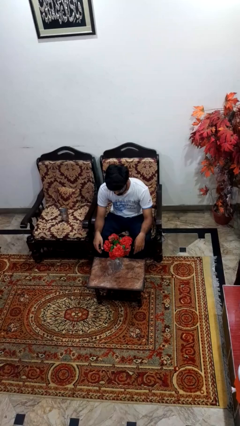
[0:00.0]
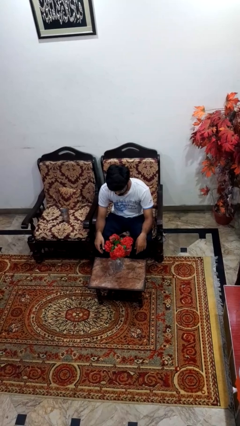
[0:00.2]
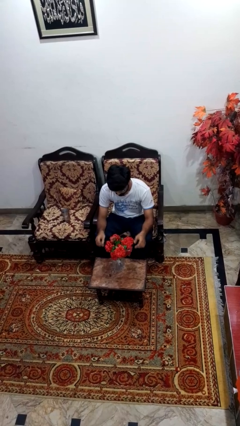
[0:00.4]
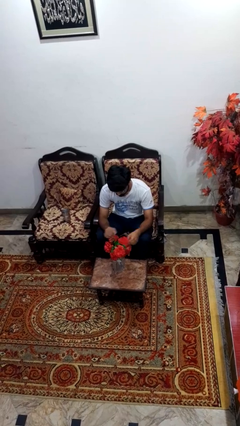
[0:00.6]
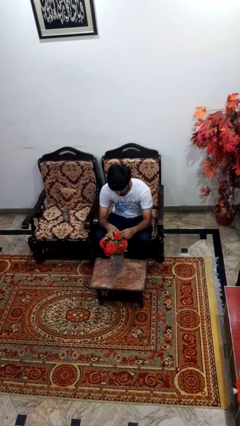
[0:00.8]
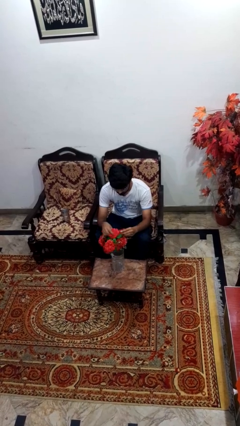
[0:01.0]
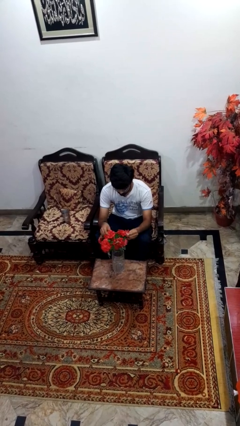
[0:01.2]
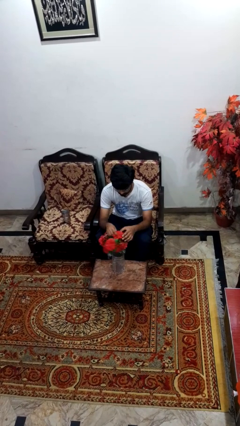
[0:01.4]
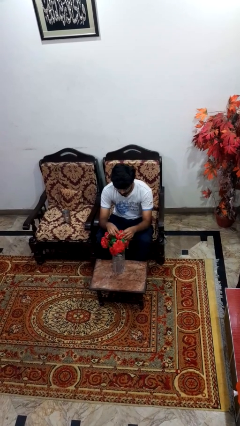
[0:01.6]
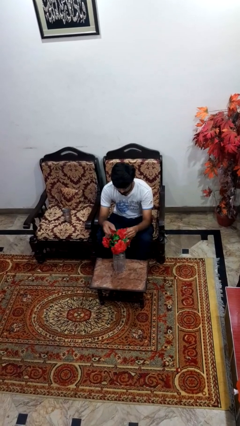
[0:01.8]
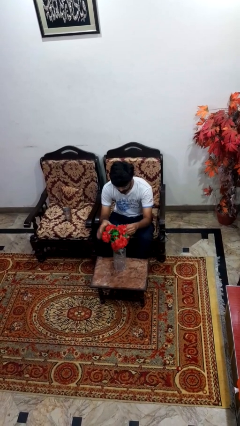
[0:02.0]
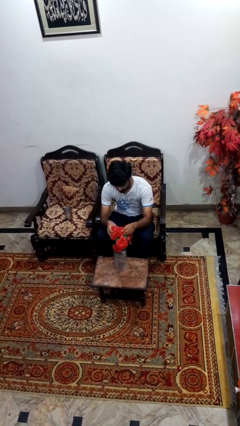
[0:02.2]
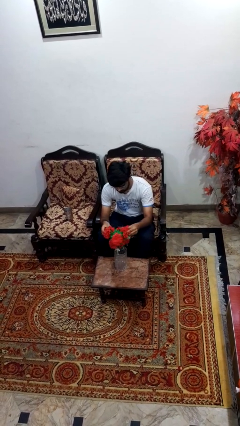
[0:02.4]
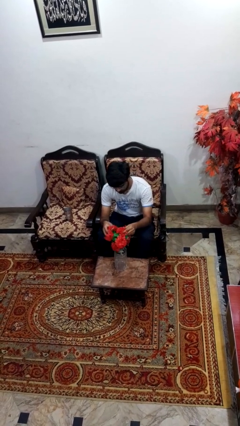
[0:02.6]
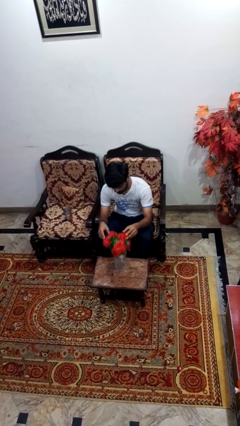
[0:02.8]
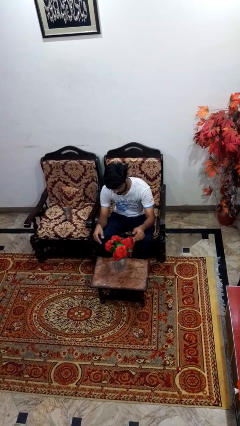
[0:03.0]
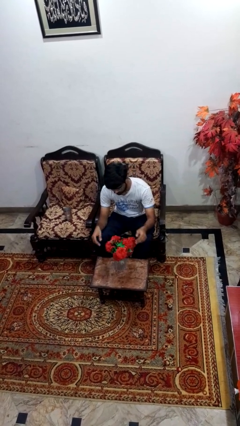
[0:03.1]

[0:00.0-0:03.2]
person arranges flowers in vase

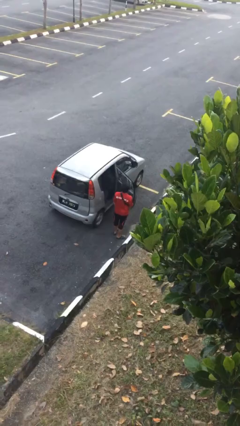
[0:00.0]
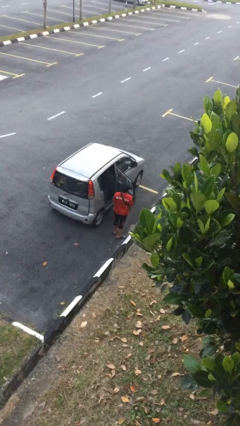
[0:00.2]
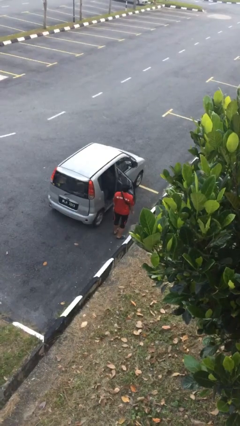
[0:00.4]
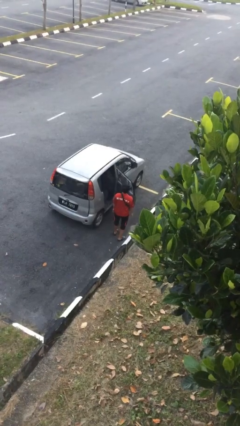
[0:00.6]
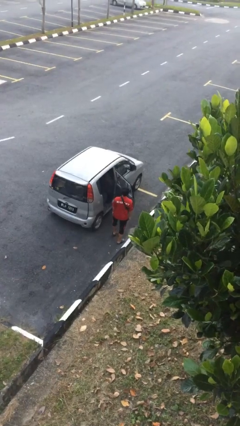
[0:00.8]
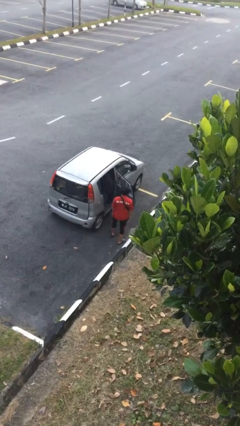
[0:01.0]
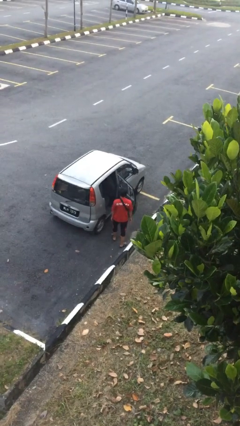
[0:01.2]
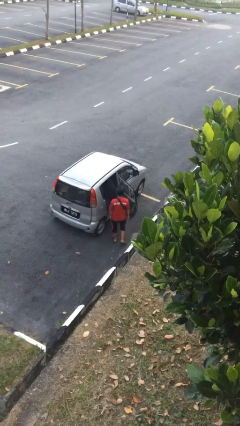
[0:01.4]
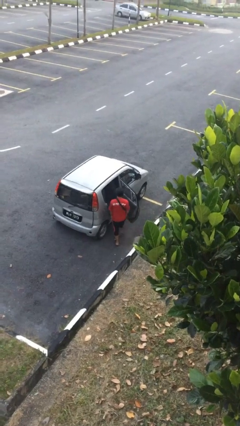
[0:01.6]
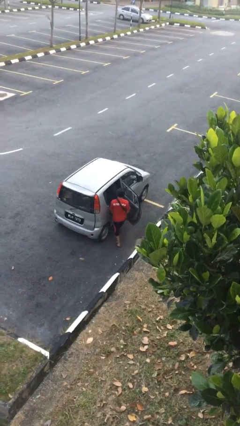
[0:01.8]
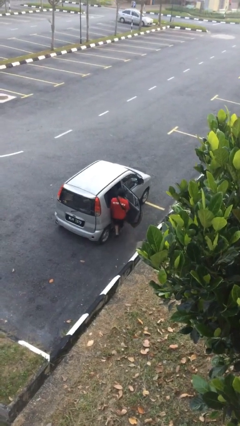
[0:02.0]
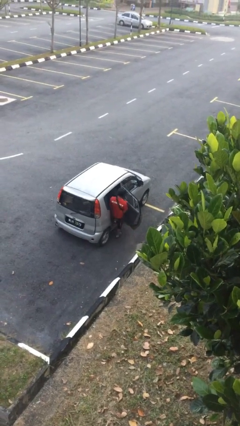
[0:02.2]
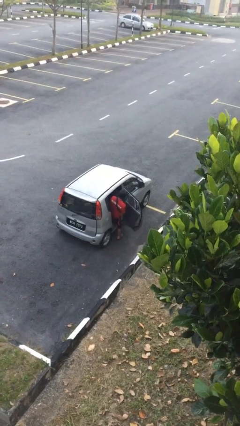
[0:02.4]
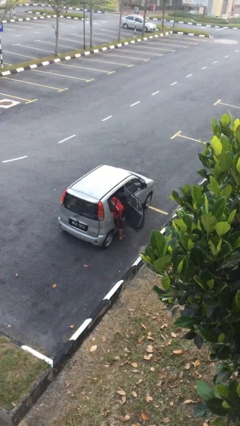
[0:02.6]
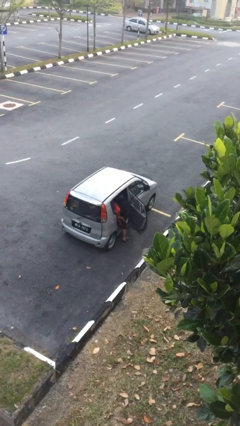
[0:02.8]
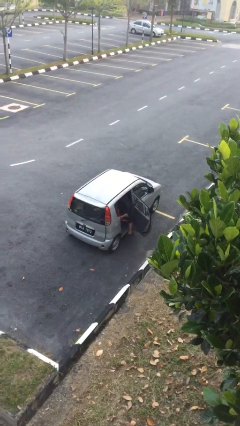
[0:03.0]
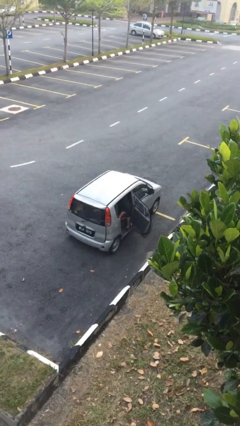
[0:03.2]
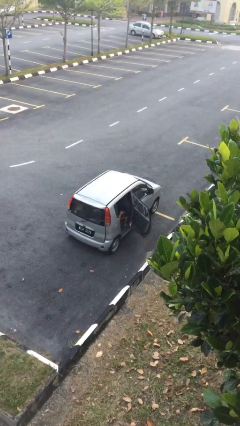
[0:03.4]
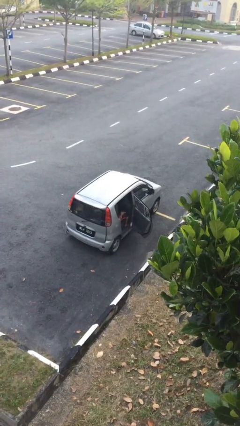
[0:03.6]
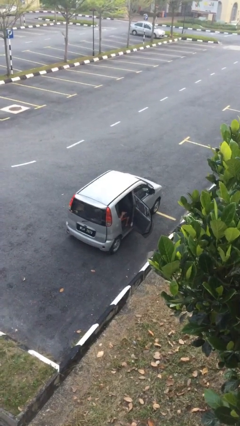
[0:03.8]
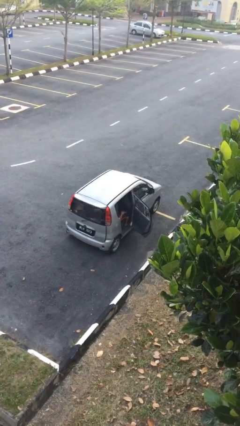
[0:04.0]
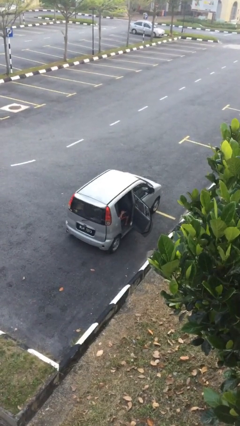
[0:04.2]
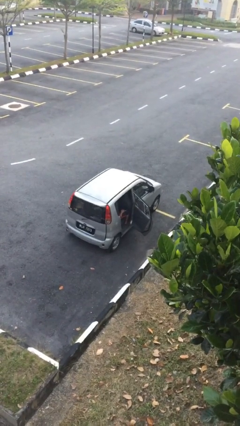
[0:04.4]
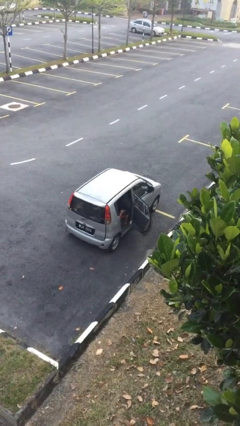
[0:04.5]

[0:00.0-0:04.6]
person enters car

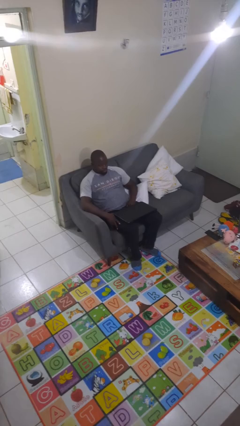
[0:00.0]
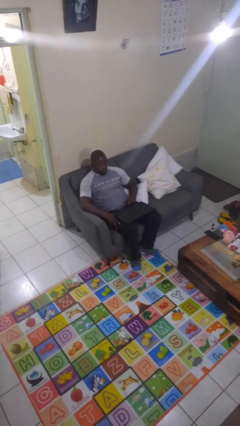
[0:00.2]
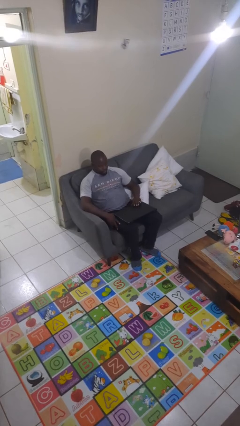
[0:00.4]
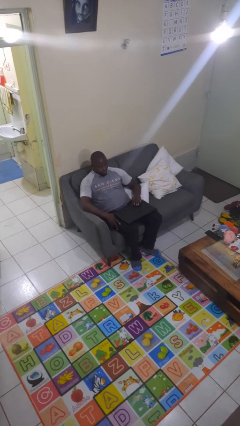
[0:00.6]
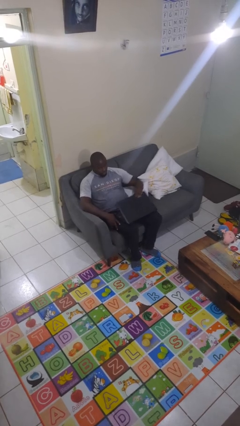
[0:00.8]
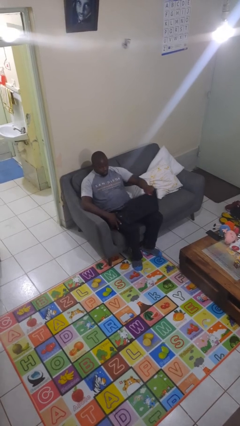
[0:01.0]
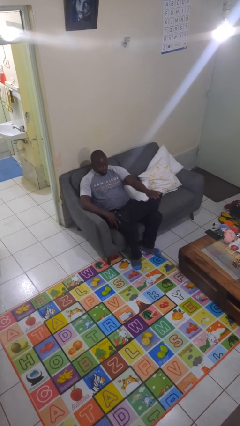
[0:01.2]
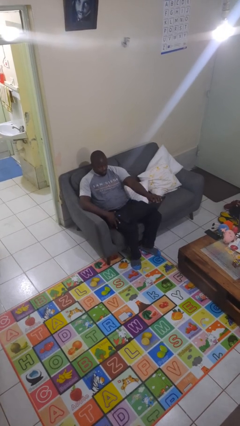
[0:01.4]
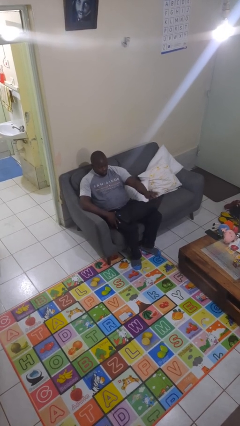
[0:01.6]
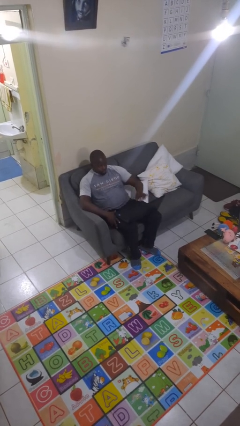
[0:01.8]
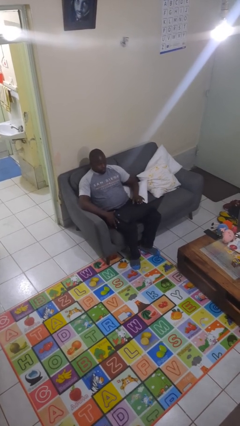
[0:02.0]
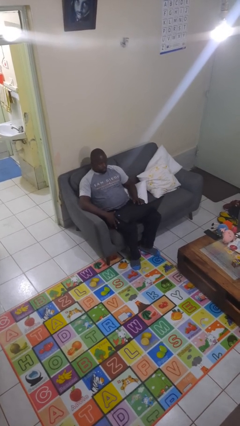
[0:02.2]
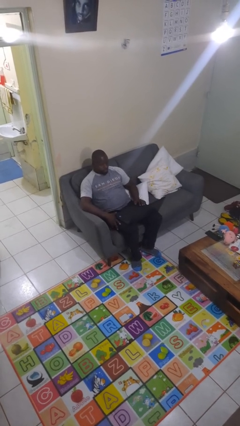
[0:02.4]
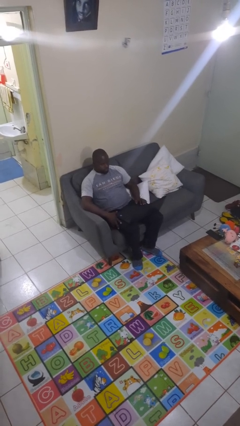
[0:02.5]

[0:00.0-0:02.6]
person opens laptop

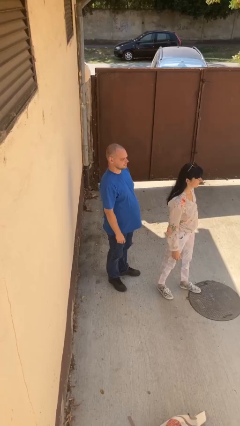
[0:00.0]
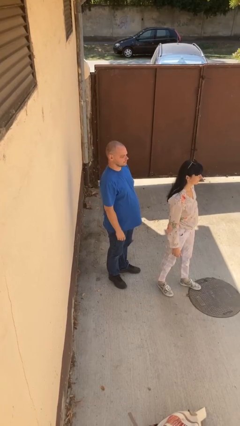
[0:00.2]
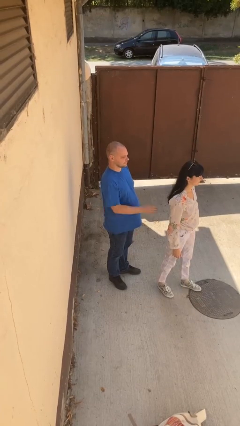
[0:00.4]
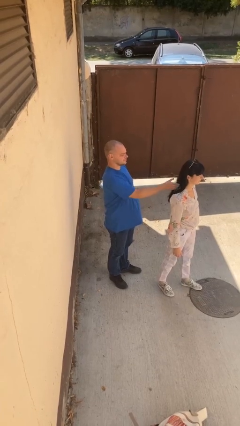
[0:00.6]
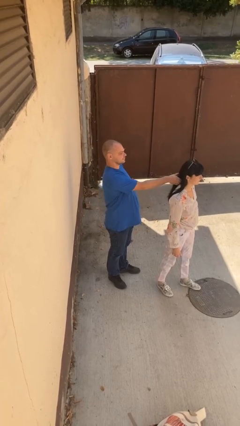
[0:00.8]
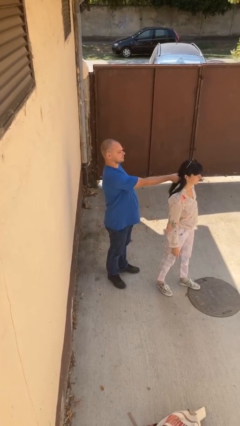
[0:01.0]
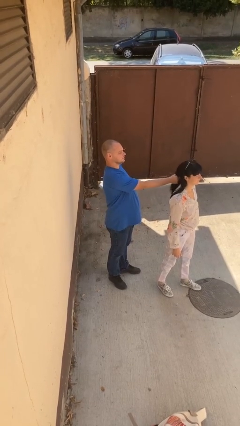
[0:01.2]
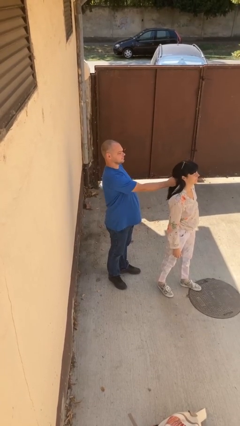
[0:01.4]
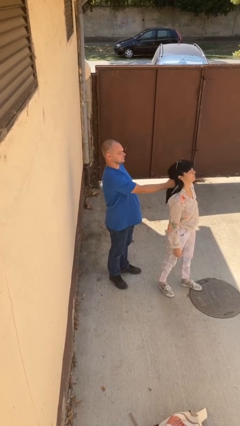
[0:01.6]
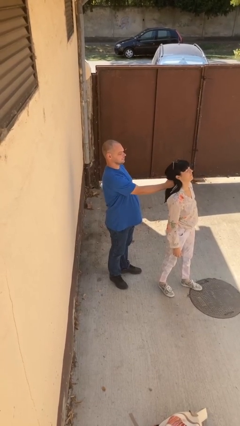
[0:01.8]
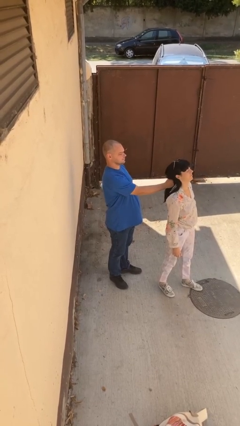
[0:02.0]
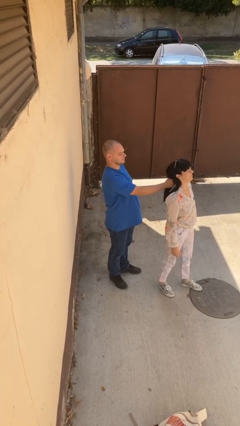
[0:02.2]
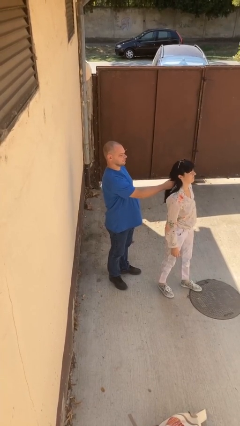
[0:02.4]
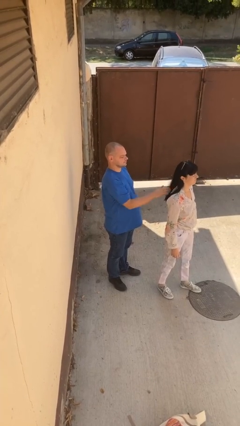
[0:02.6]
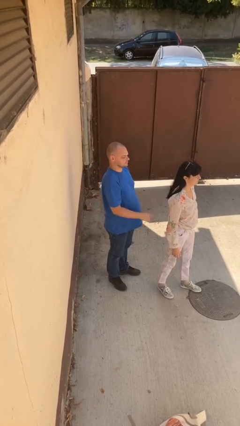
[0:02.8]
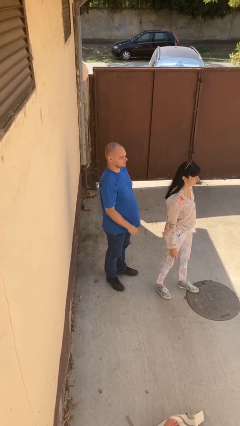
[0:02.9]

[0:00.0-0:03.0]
person grabs person by hair

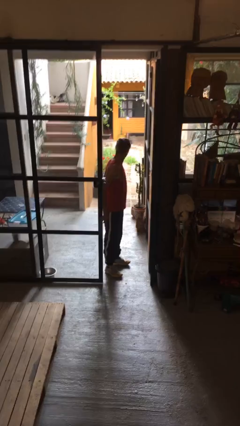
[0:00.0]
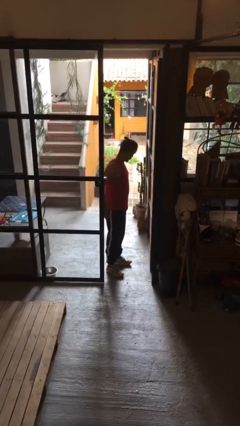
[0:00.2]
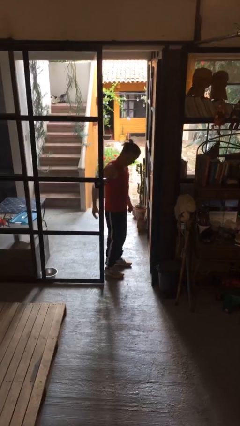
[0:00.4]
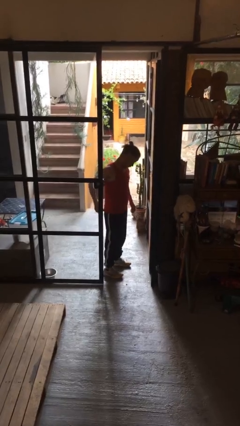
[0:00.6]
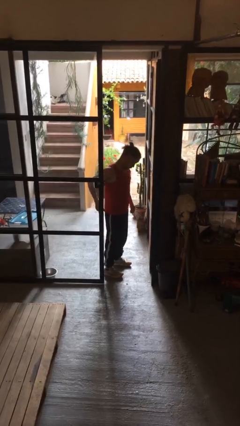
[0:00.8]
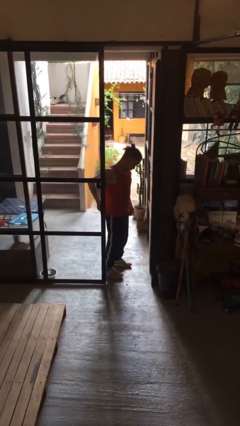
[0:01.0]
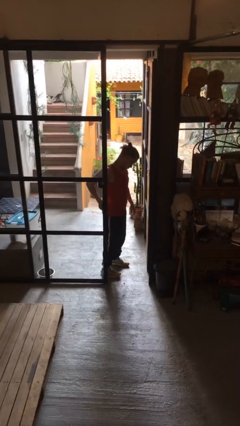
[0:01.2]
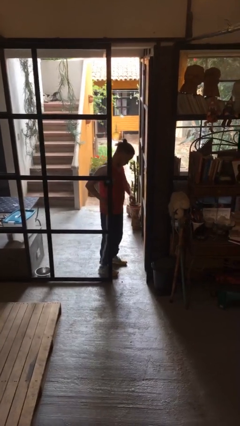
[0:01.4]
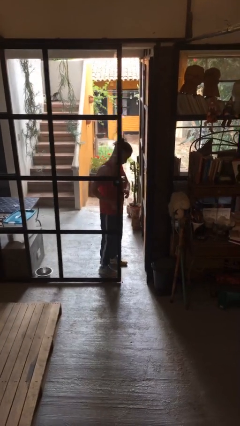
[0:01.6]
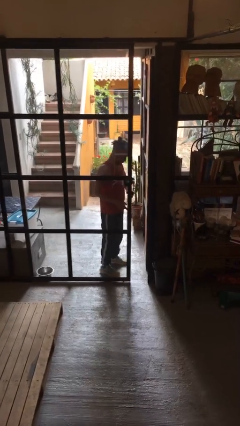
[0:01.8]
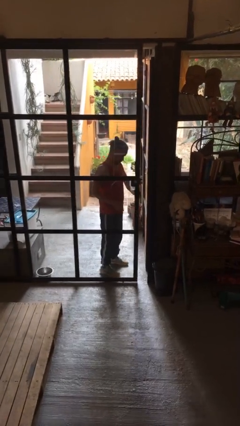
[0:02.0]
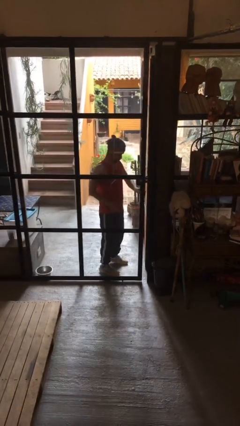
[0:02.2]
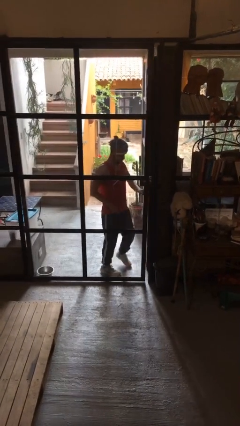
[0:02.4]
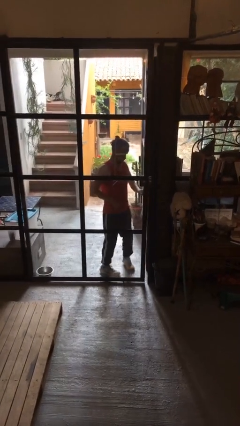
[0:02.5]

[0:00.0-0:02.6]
person closes sliding door

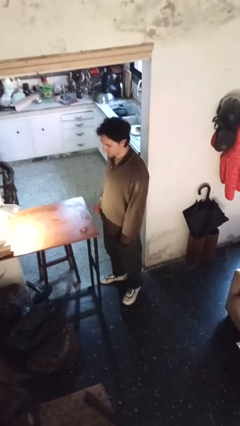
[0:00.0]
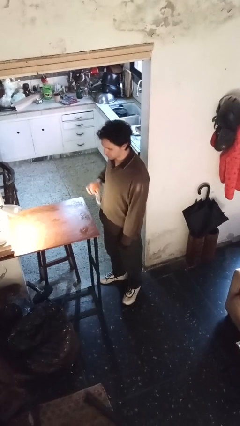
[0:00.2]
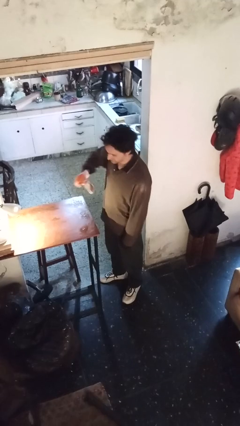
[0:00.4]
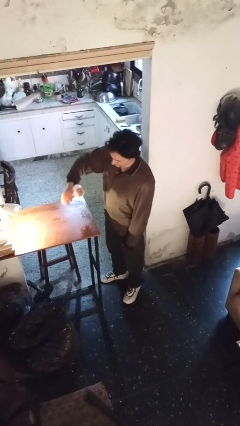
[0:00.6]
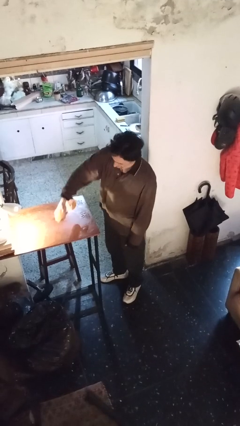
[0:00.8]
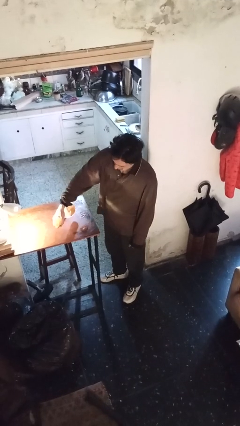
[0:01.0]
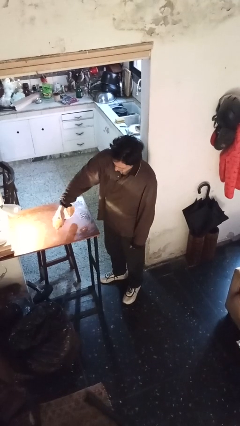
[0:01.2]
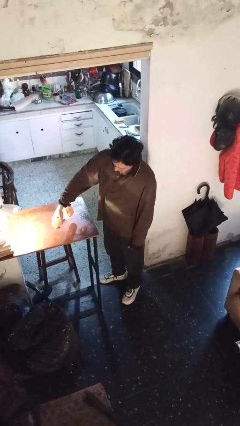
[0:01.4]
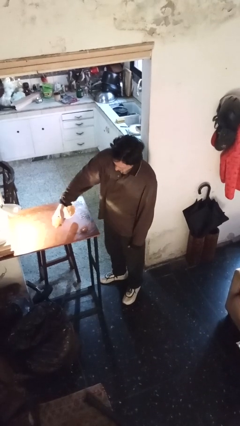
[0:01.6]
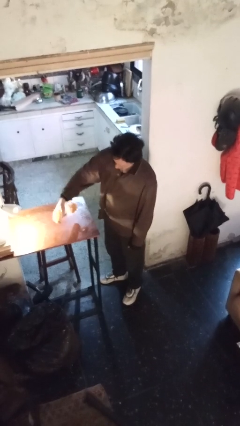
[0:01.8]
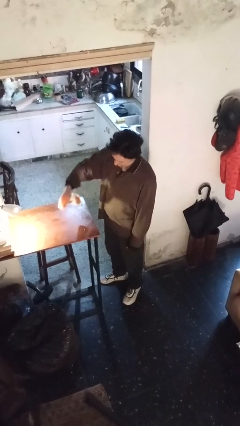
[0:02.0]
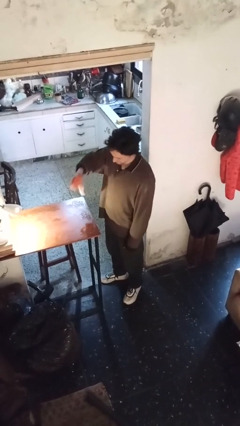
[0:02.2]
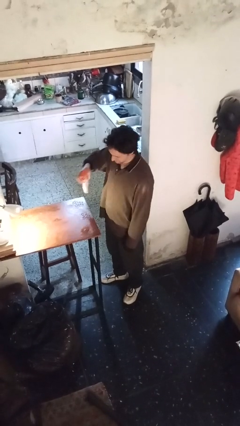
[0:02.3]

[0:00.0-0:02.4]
person sprays from bottle
